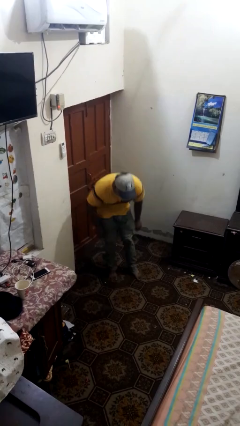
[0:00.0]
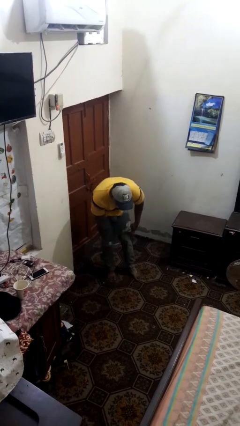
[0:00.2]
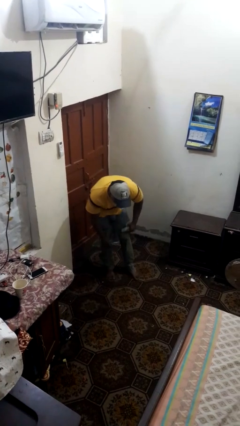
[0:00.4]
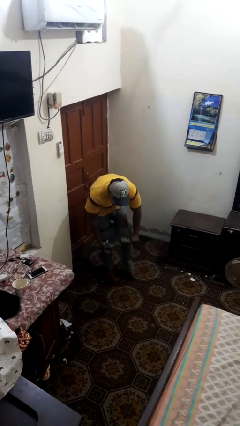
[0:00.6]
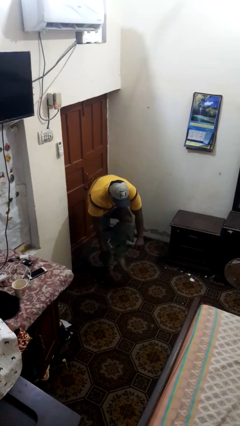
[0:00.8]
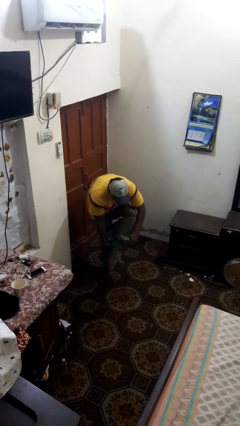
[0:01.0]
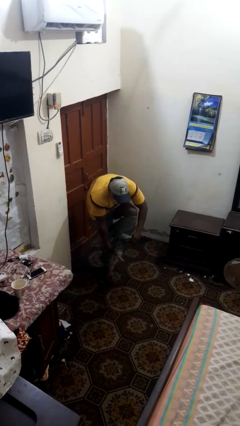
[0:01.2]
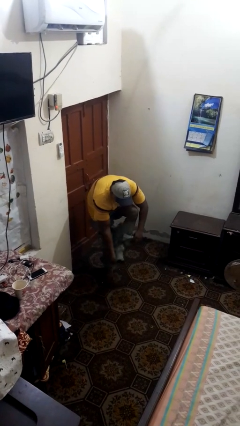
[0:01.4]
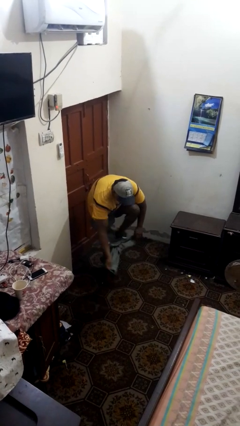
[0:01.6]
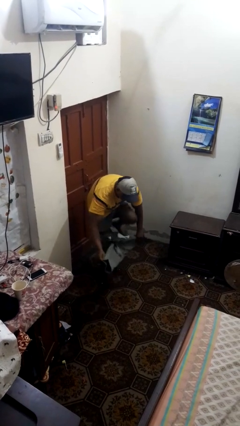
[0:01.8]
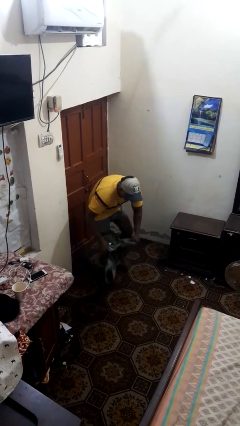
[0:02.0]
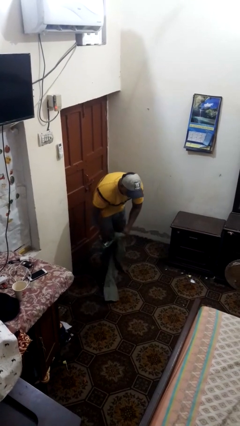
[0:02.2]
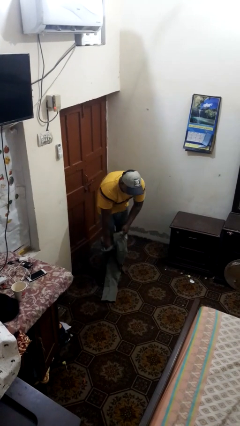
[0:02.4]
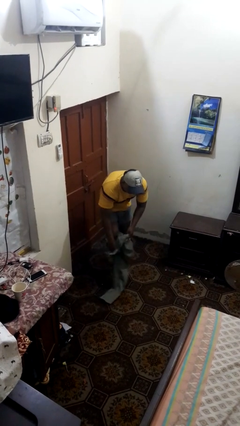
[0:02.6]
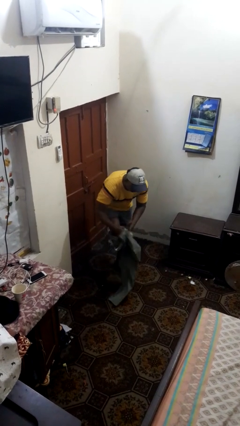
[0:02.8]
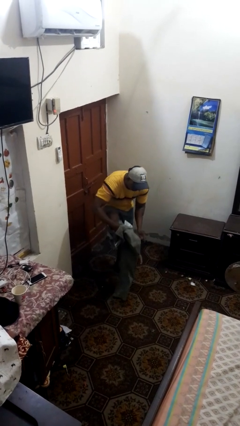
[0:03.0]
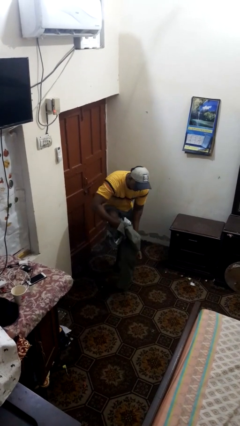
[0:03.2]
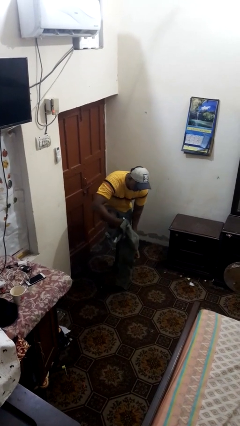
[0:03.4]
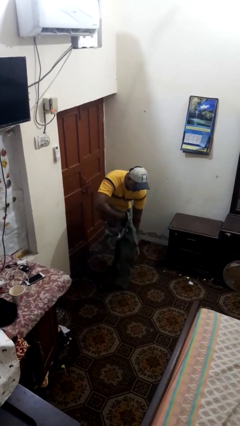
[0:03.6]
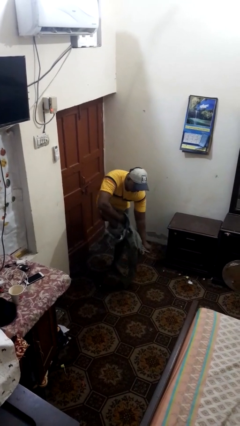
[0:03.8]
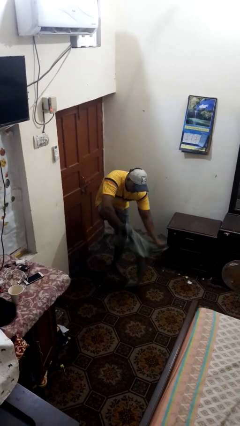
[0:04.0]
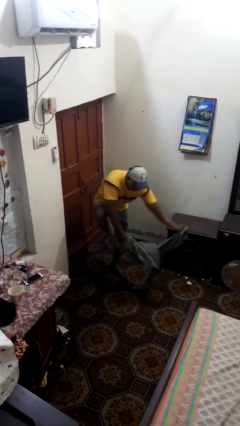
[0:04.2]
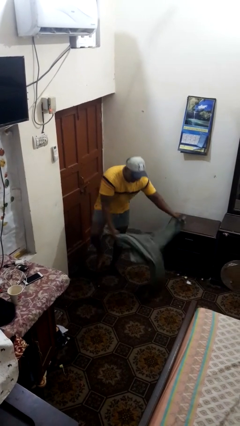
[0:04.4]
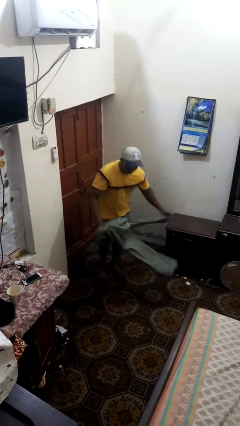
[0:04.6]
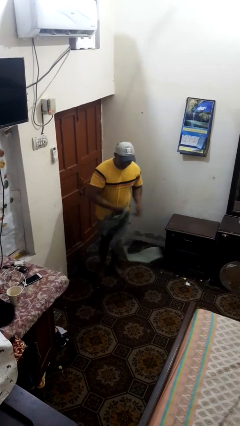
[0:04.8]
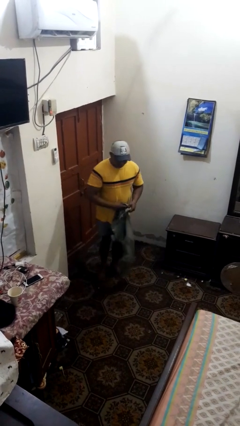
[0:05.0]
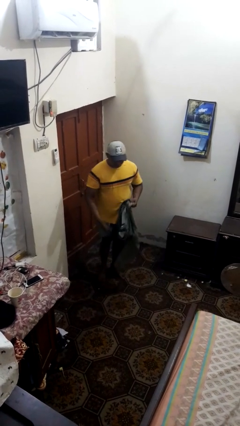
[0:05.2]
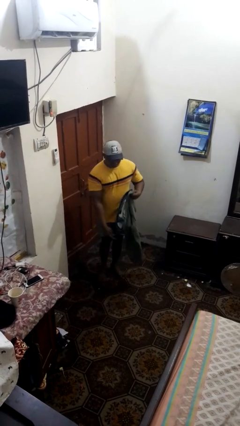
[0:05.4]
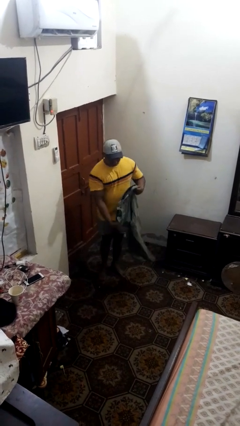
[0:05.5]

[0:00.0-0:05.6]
person takes off pants

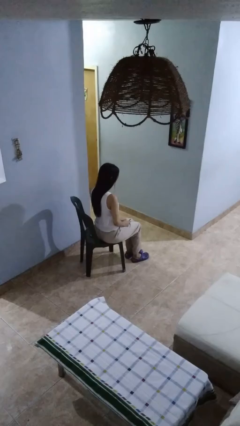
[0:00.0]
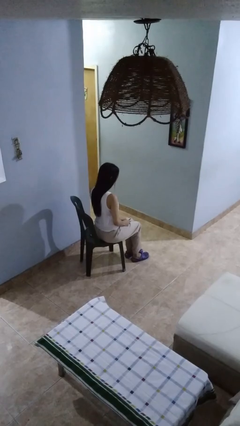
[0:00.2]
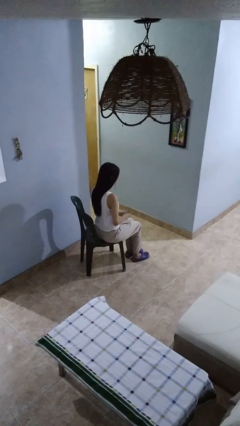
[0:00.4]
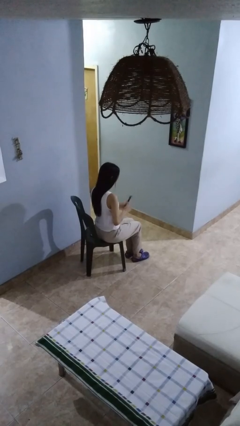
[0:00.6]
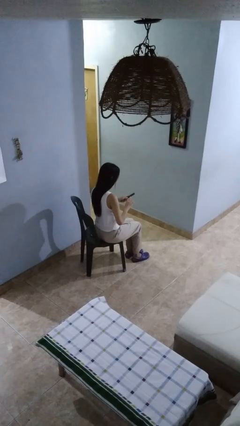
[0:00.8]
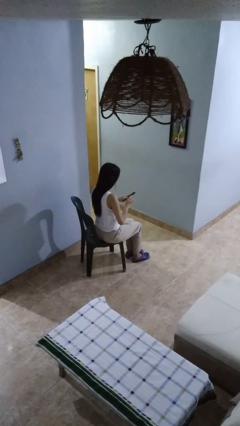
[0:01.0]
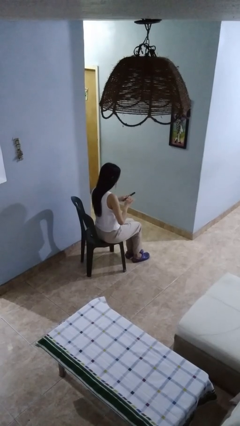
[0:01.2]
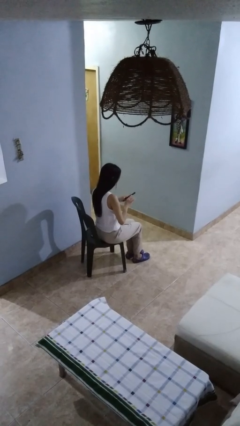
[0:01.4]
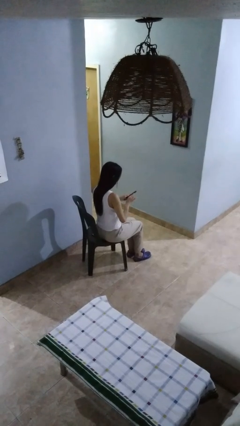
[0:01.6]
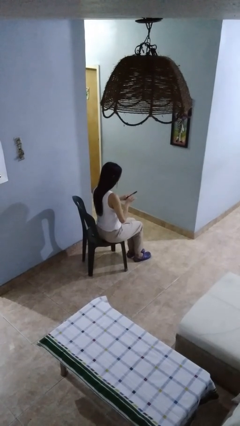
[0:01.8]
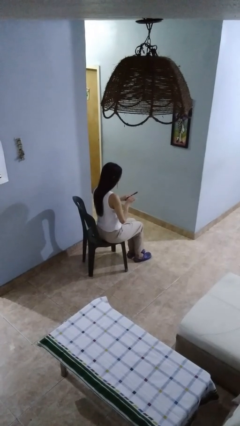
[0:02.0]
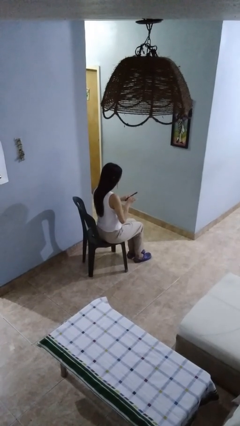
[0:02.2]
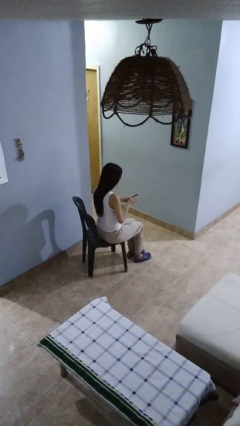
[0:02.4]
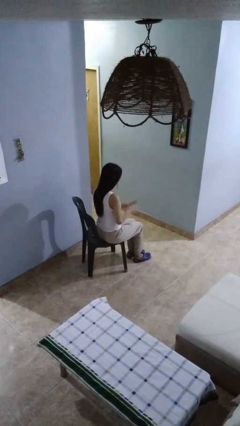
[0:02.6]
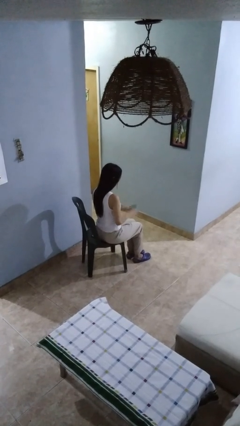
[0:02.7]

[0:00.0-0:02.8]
person files fingernails

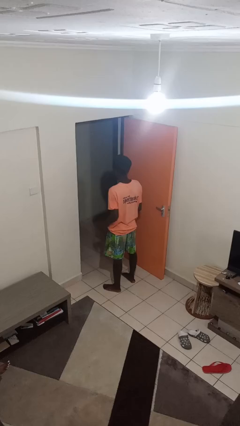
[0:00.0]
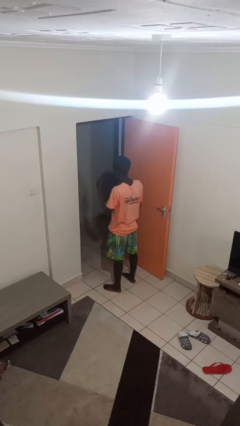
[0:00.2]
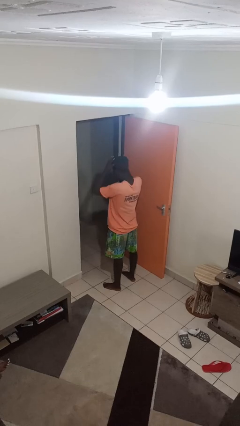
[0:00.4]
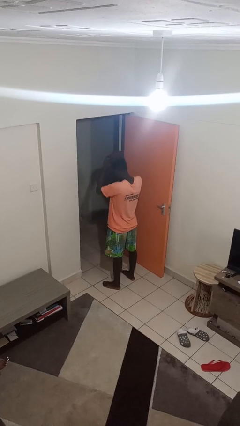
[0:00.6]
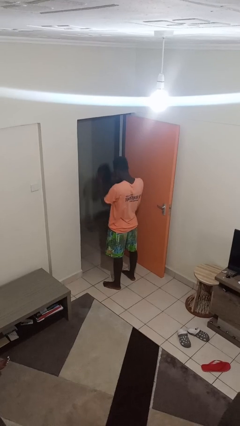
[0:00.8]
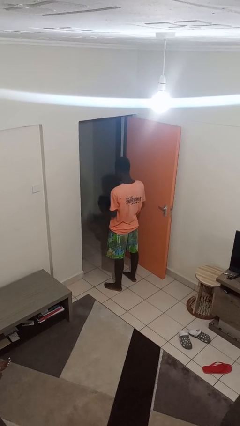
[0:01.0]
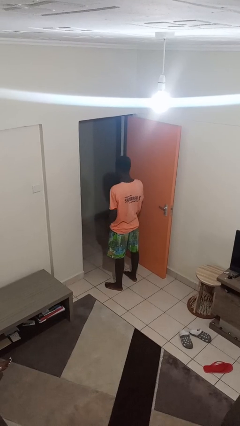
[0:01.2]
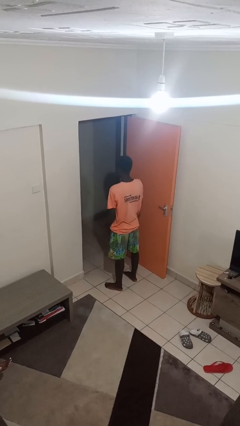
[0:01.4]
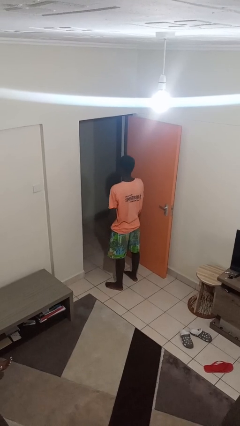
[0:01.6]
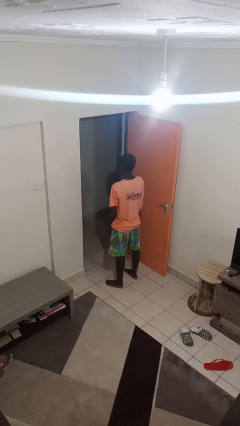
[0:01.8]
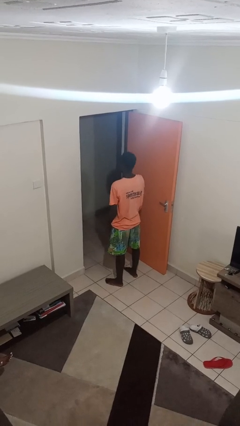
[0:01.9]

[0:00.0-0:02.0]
person takes off hat

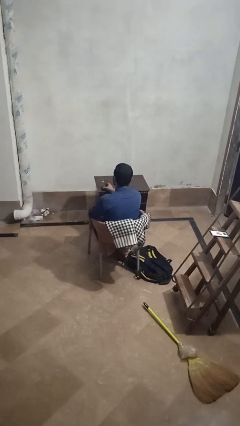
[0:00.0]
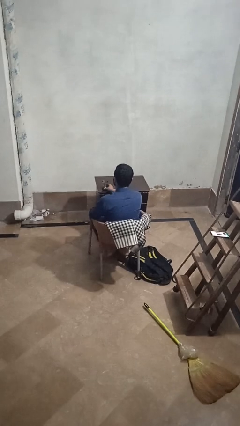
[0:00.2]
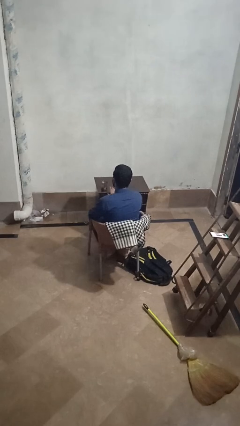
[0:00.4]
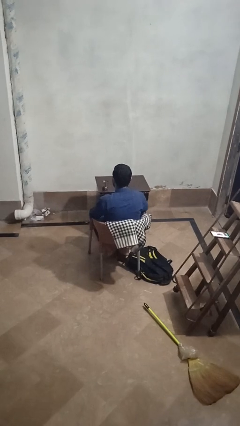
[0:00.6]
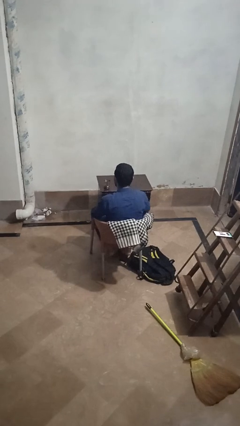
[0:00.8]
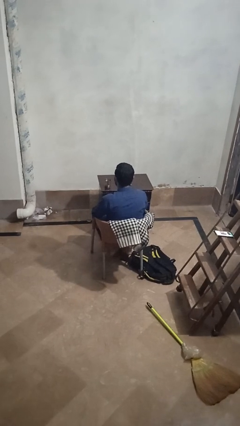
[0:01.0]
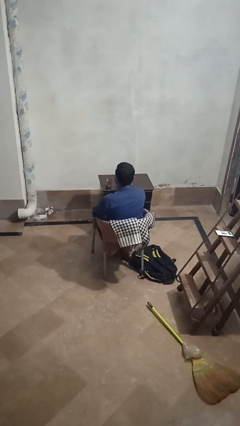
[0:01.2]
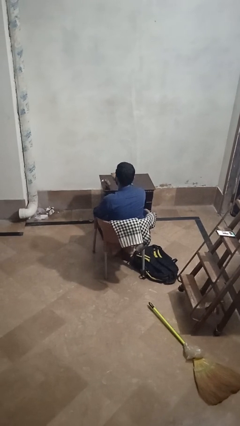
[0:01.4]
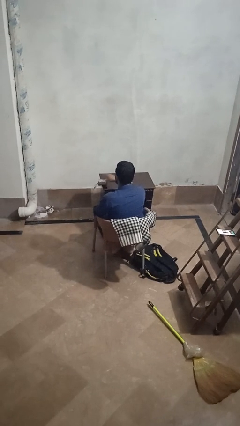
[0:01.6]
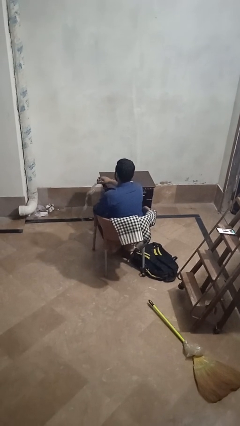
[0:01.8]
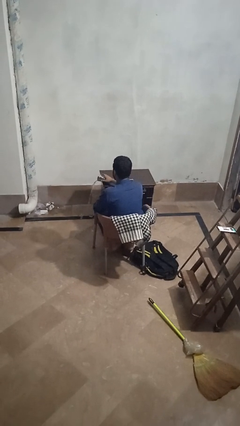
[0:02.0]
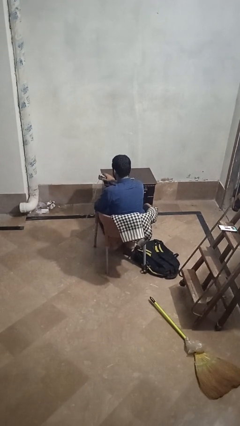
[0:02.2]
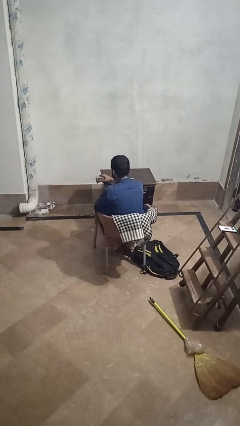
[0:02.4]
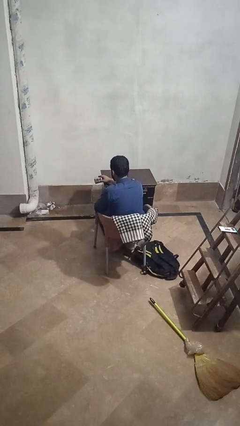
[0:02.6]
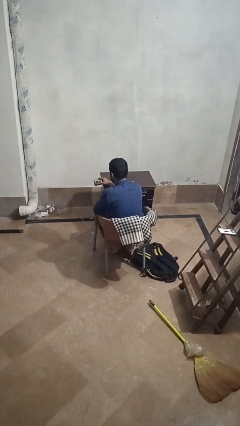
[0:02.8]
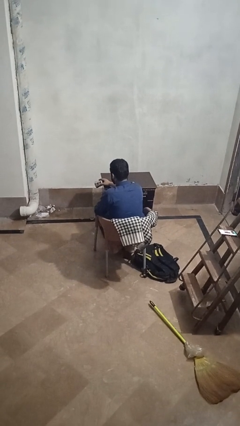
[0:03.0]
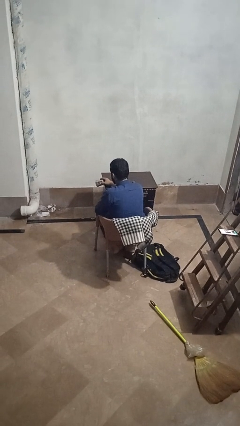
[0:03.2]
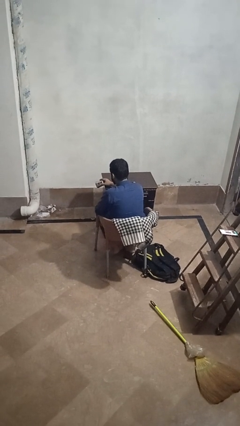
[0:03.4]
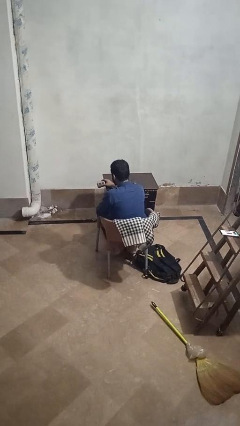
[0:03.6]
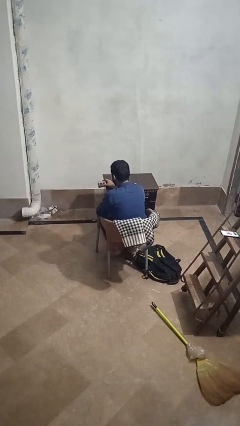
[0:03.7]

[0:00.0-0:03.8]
person spills on table

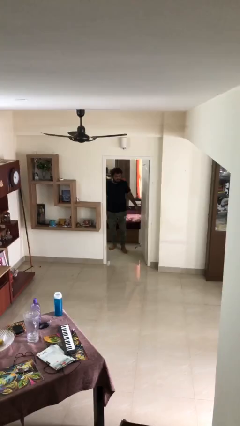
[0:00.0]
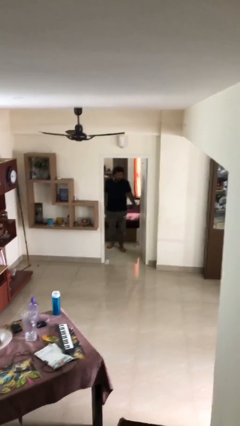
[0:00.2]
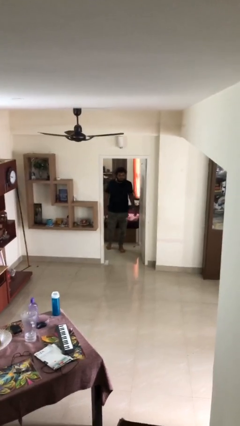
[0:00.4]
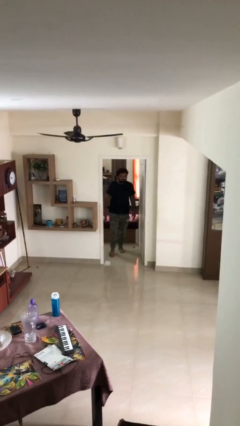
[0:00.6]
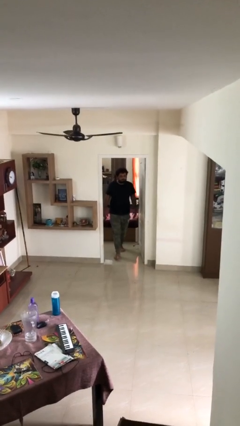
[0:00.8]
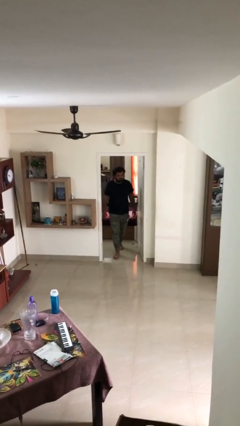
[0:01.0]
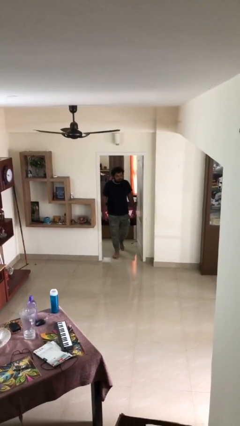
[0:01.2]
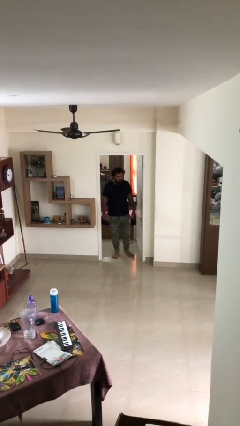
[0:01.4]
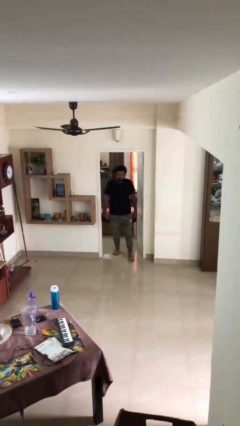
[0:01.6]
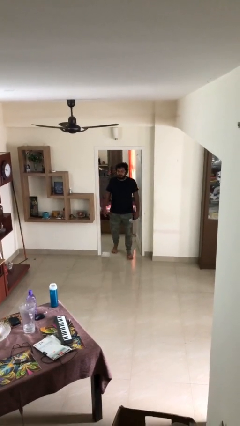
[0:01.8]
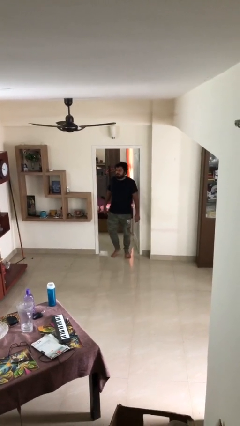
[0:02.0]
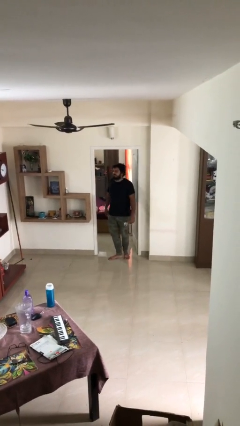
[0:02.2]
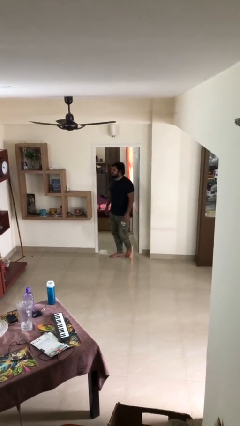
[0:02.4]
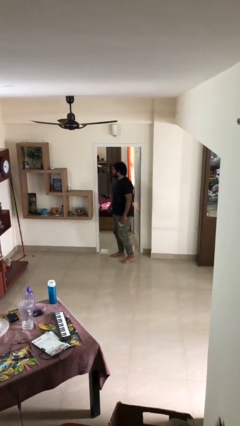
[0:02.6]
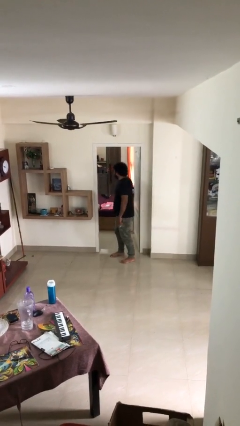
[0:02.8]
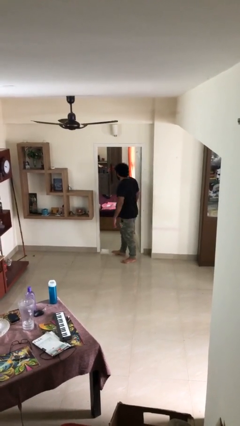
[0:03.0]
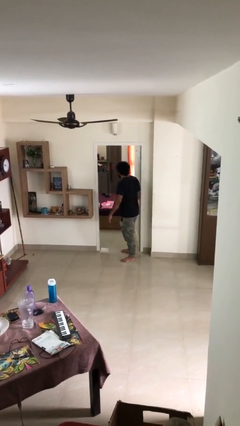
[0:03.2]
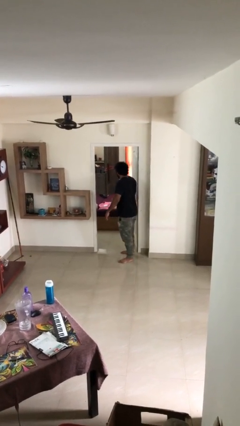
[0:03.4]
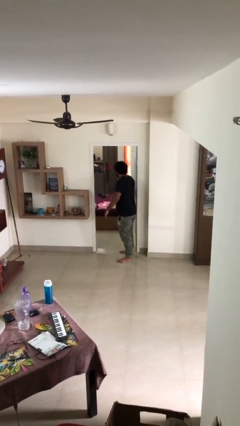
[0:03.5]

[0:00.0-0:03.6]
person enters scene through structure
